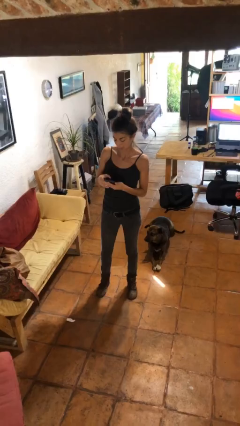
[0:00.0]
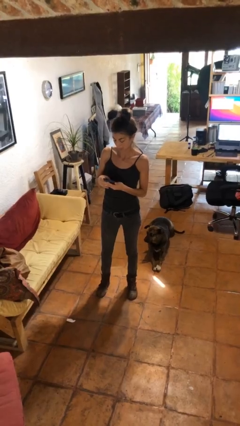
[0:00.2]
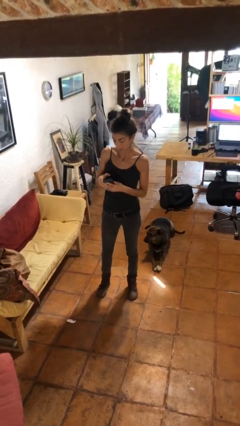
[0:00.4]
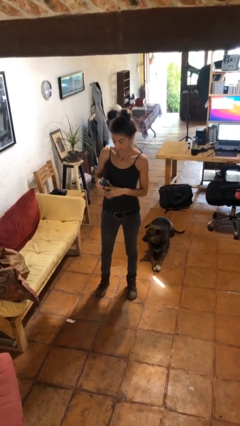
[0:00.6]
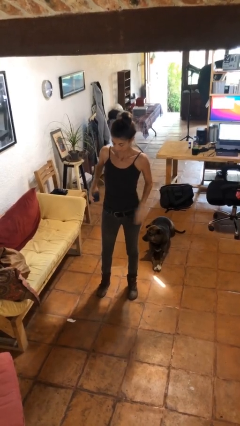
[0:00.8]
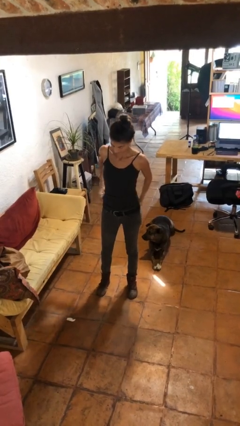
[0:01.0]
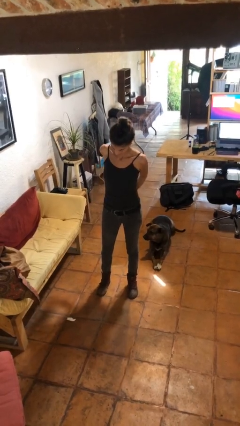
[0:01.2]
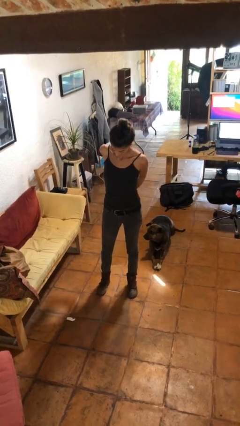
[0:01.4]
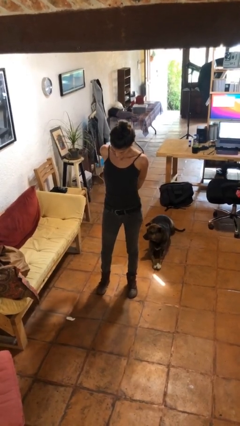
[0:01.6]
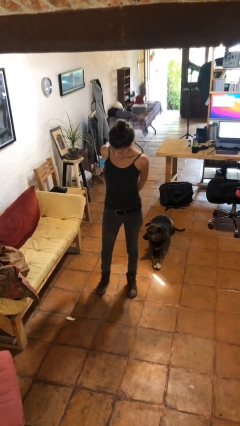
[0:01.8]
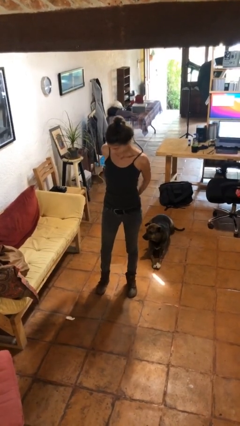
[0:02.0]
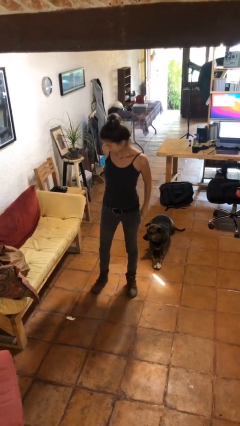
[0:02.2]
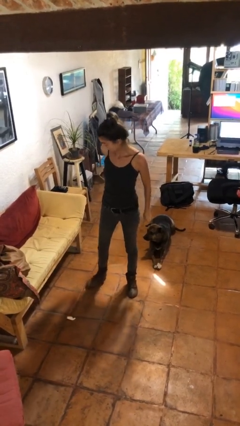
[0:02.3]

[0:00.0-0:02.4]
person puts phone into pocket

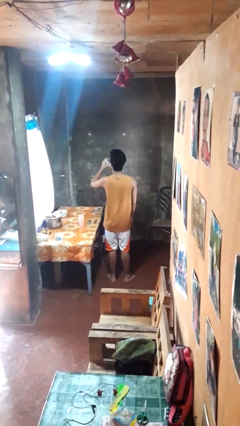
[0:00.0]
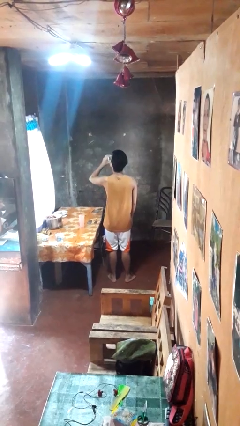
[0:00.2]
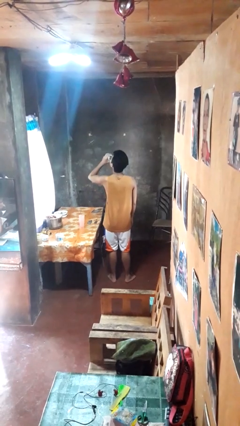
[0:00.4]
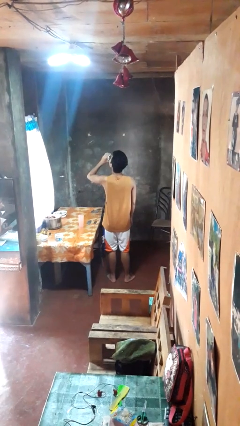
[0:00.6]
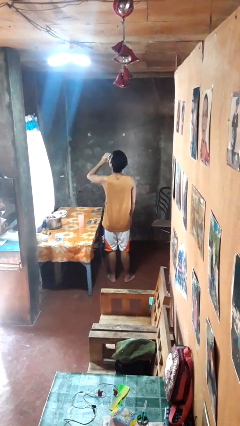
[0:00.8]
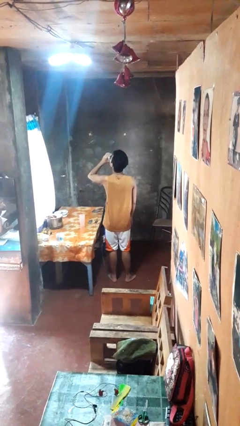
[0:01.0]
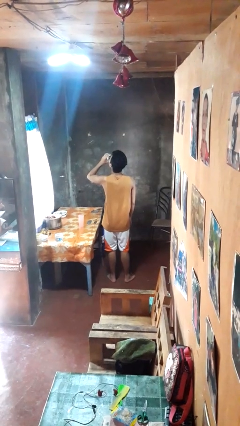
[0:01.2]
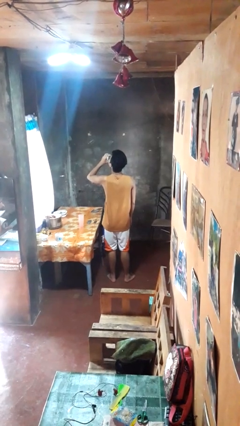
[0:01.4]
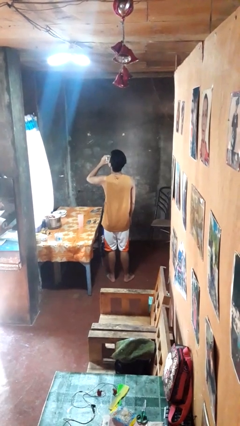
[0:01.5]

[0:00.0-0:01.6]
person drinks from beverage can

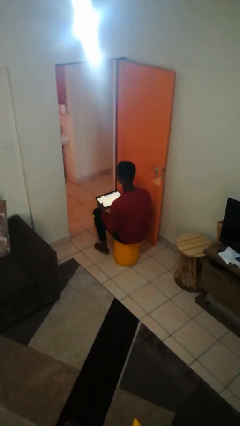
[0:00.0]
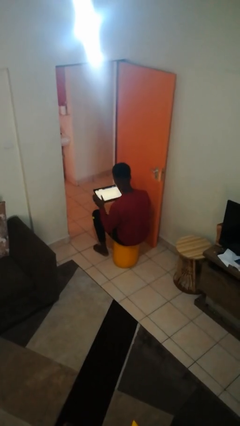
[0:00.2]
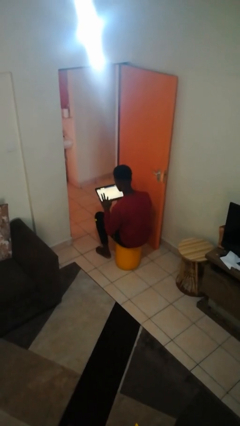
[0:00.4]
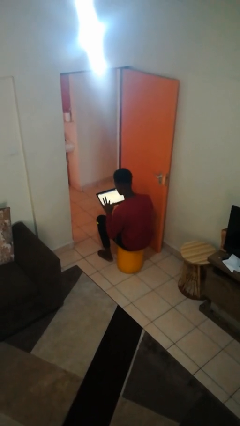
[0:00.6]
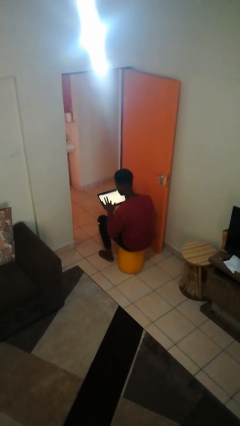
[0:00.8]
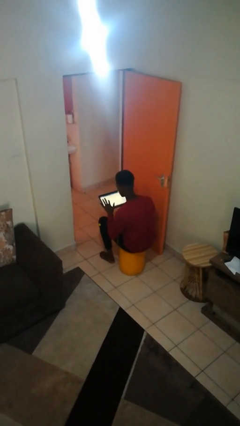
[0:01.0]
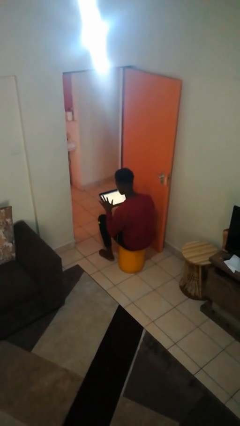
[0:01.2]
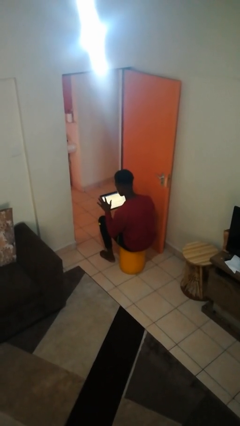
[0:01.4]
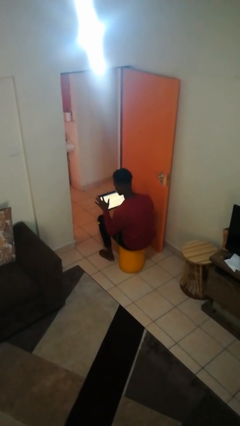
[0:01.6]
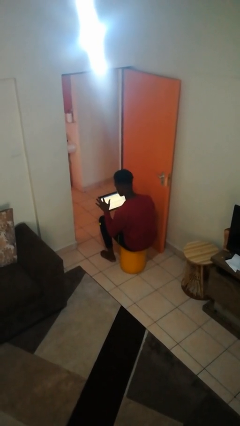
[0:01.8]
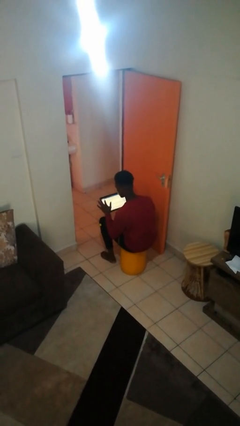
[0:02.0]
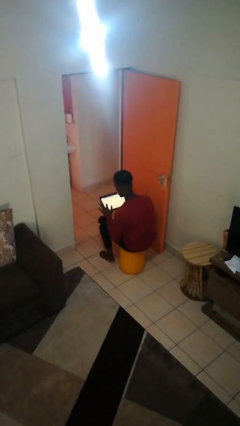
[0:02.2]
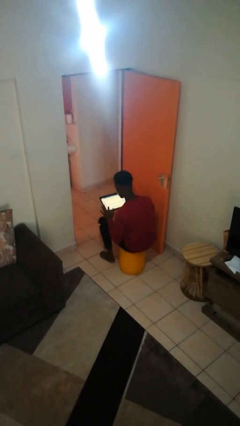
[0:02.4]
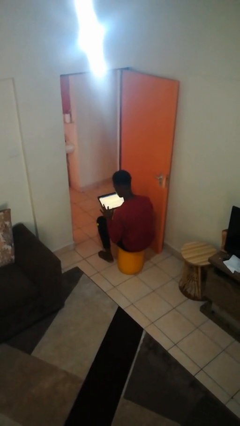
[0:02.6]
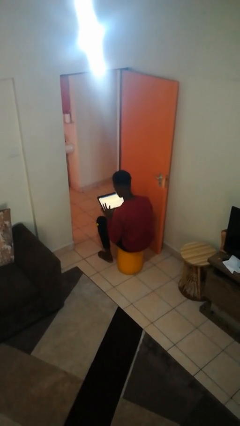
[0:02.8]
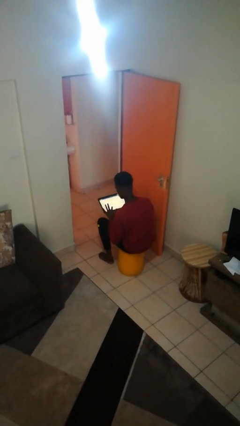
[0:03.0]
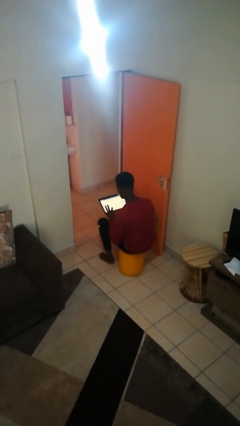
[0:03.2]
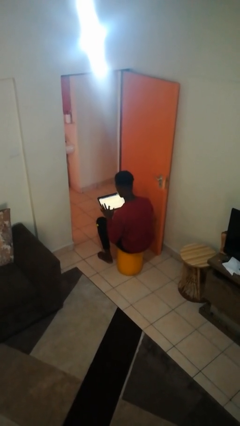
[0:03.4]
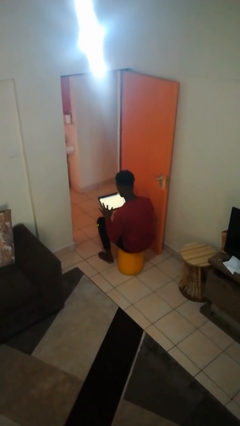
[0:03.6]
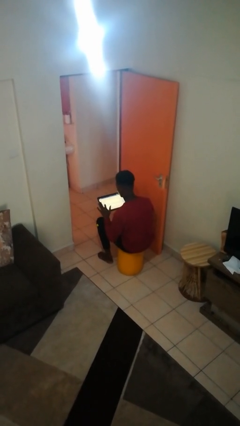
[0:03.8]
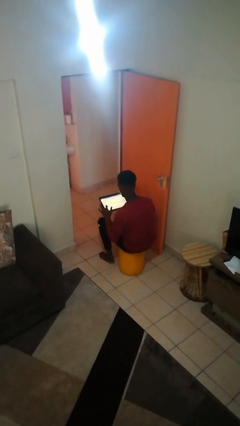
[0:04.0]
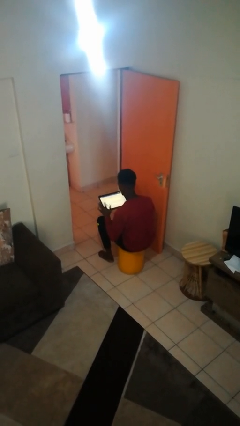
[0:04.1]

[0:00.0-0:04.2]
person interacts with tablet

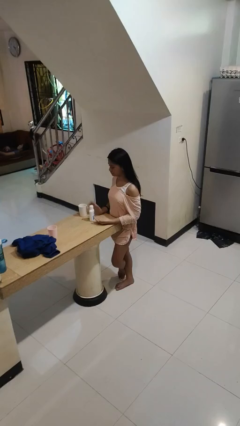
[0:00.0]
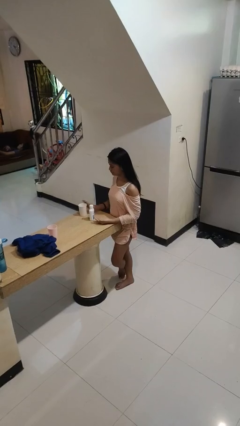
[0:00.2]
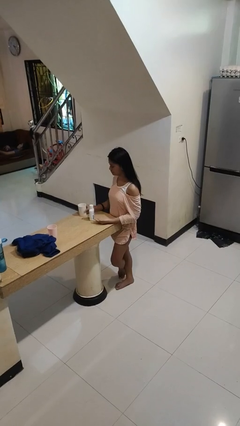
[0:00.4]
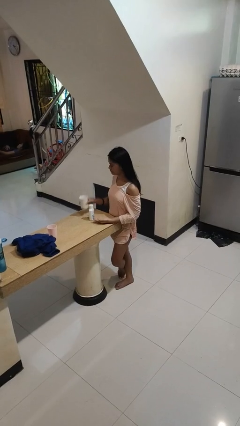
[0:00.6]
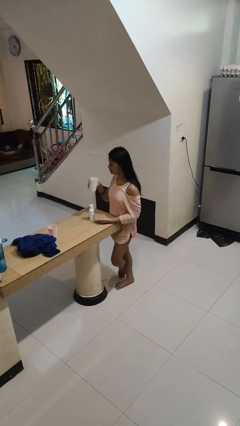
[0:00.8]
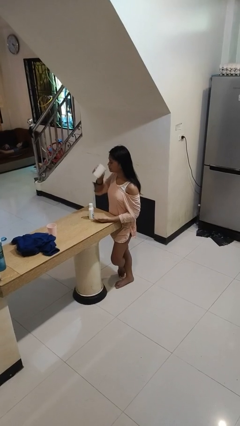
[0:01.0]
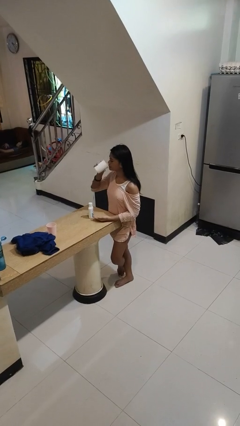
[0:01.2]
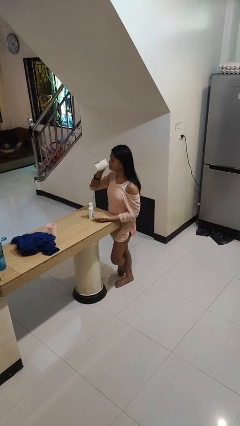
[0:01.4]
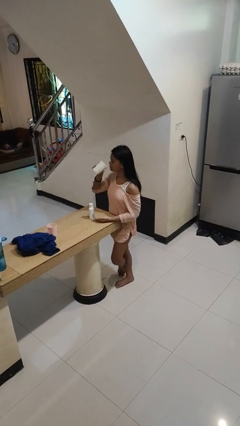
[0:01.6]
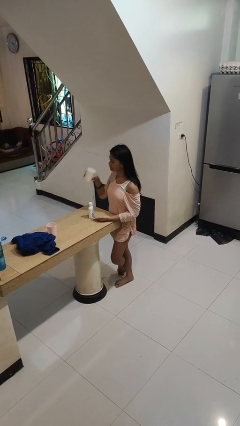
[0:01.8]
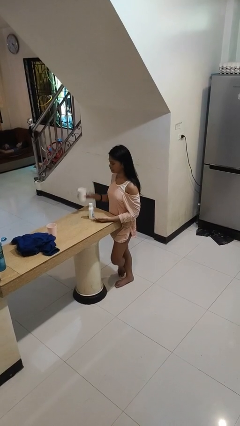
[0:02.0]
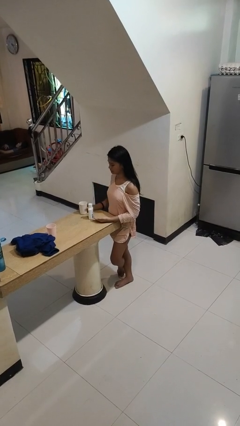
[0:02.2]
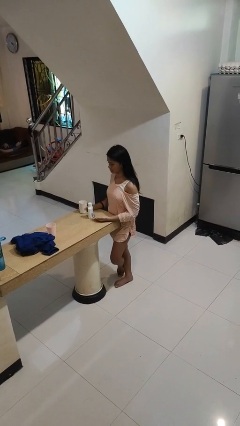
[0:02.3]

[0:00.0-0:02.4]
person drinks from cup

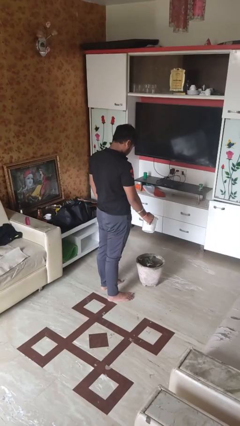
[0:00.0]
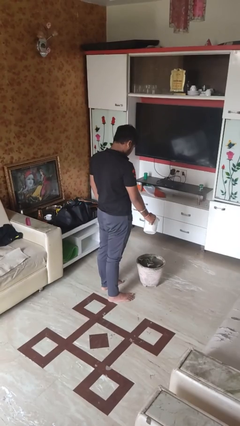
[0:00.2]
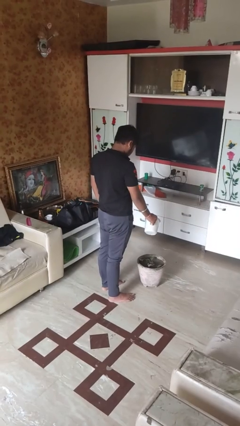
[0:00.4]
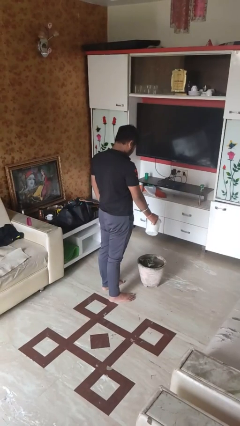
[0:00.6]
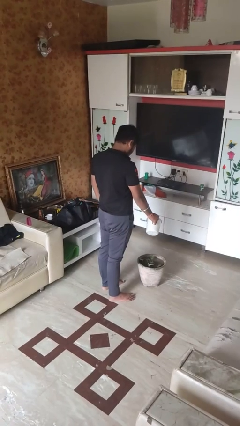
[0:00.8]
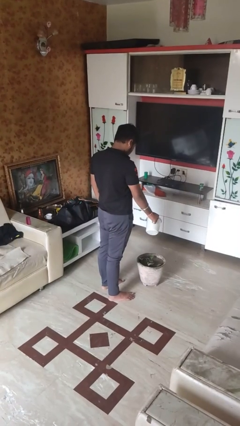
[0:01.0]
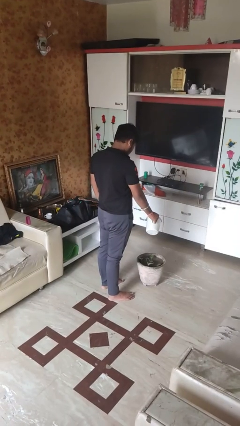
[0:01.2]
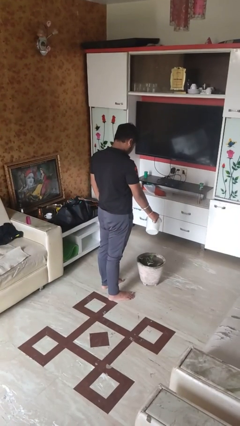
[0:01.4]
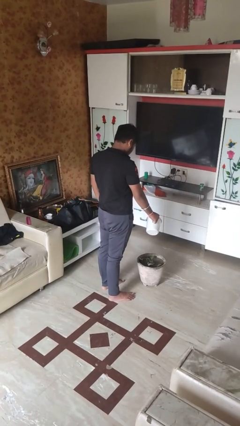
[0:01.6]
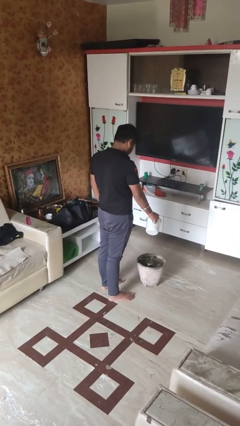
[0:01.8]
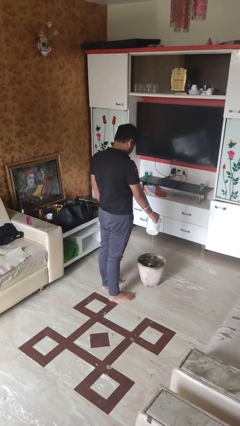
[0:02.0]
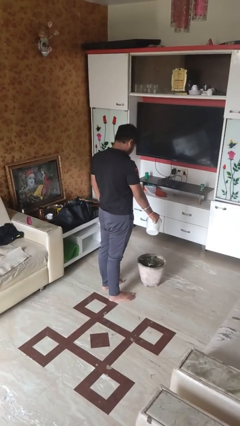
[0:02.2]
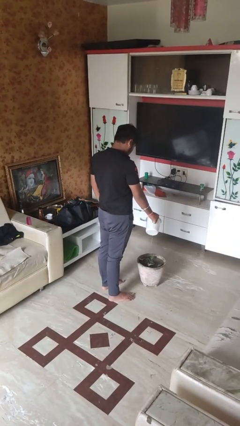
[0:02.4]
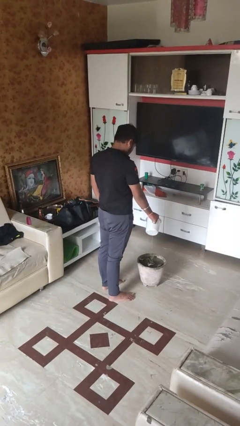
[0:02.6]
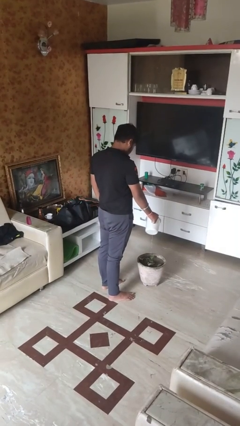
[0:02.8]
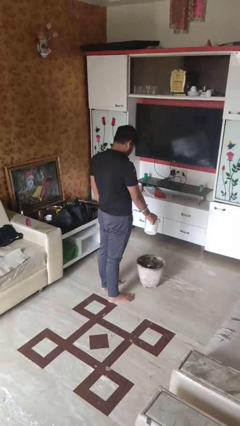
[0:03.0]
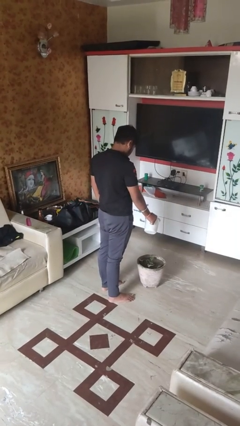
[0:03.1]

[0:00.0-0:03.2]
person waters houseplant

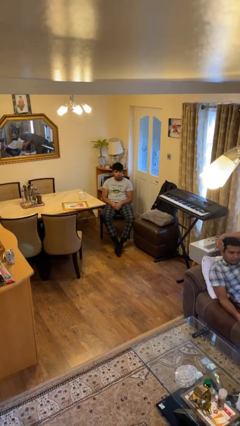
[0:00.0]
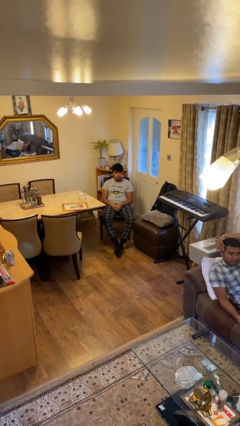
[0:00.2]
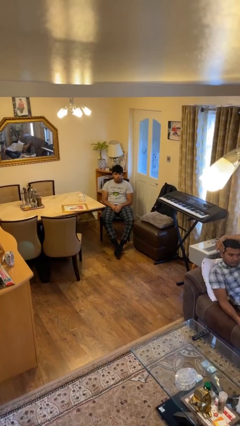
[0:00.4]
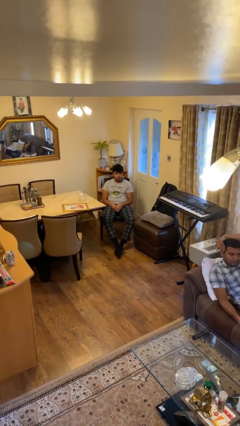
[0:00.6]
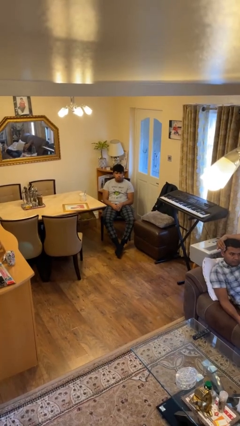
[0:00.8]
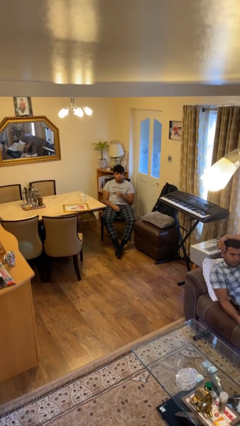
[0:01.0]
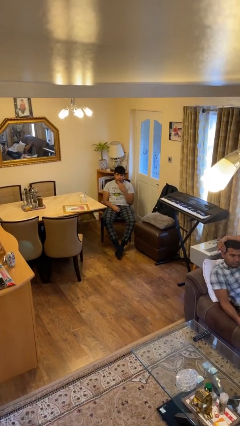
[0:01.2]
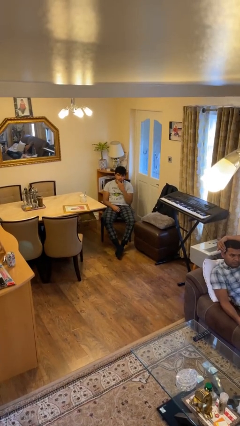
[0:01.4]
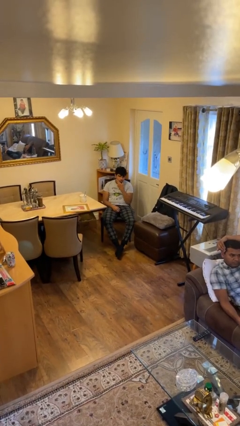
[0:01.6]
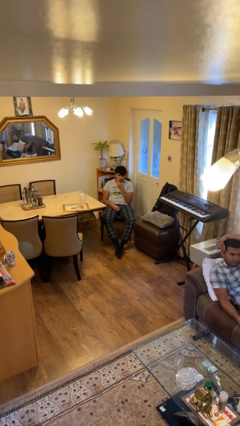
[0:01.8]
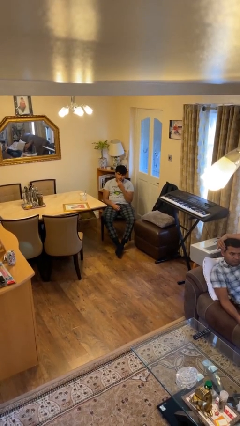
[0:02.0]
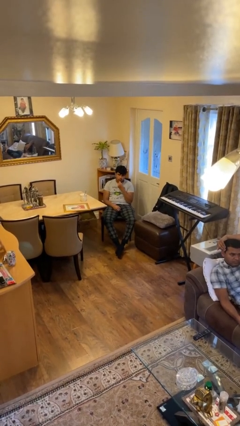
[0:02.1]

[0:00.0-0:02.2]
person strokes chin

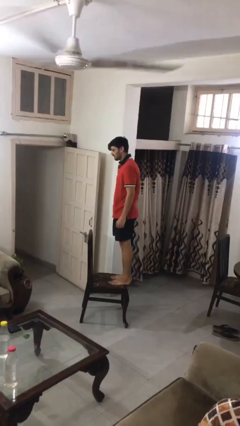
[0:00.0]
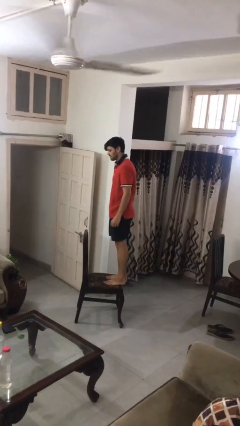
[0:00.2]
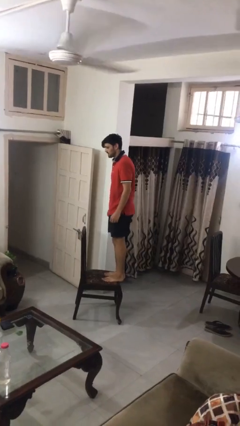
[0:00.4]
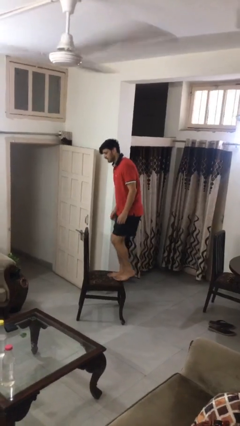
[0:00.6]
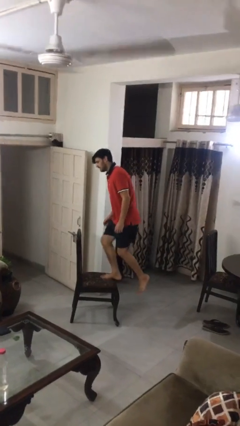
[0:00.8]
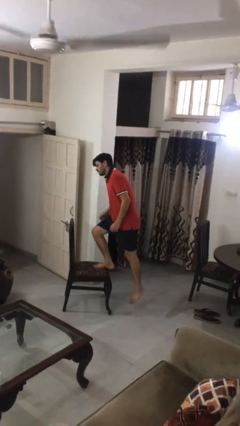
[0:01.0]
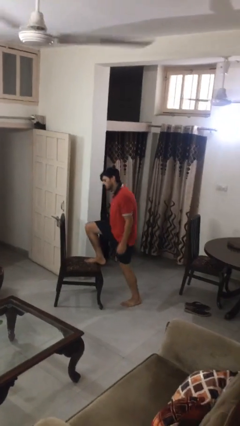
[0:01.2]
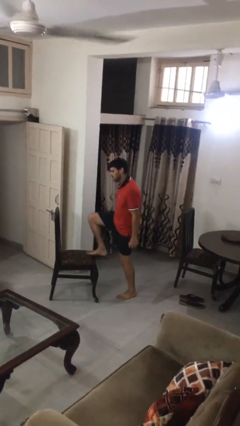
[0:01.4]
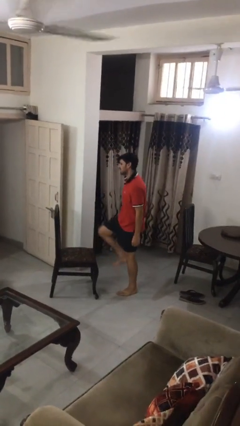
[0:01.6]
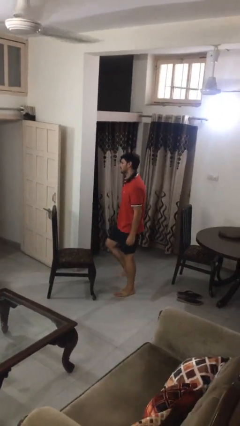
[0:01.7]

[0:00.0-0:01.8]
person climbs off chair
